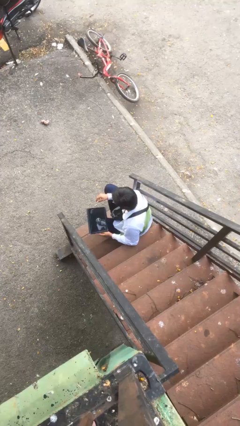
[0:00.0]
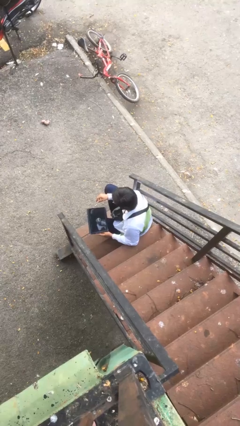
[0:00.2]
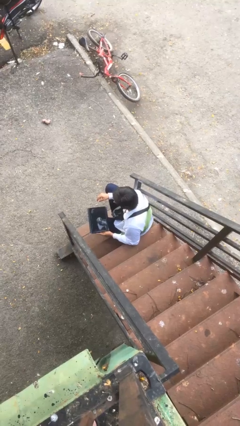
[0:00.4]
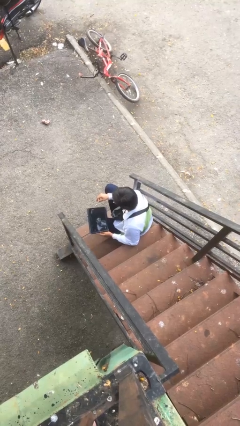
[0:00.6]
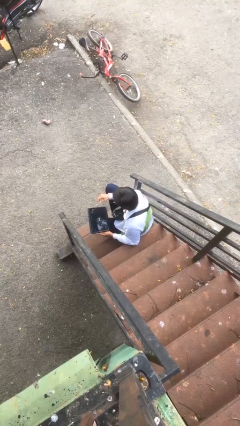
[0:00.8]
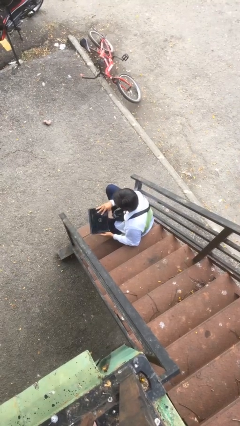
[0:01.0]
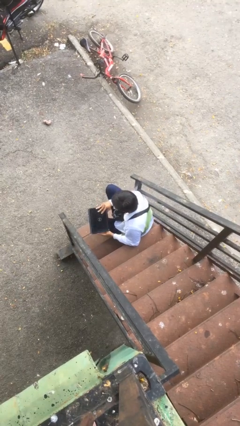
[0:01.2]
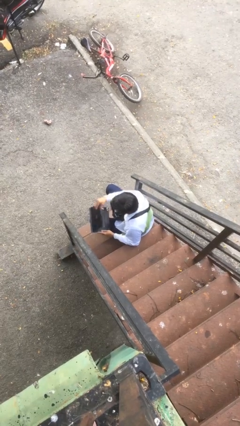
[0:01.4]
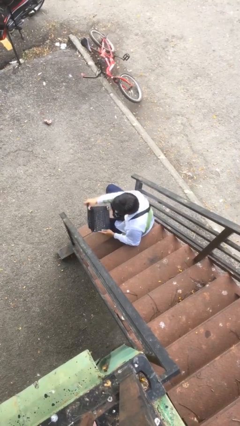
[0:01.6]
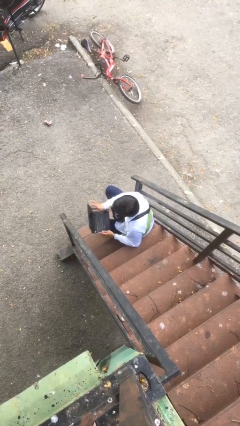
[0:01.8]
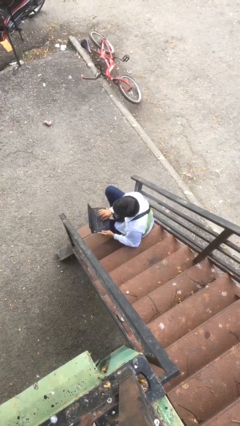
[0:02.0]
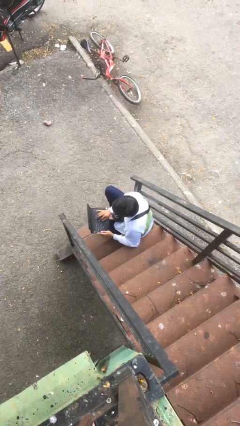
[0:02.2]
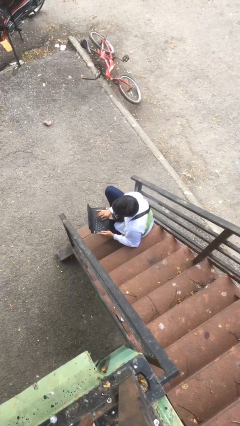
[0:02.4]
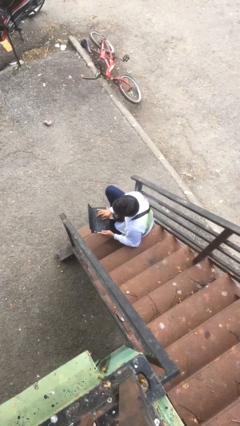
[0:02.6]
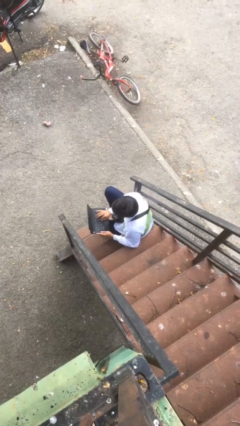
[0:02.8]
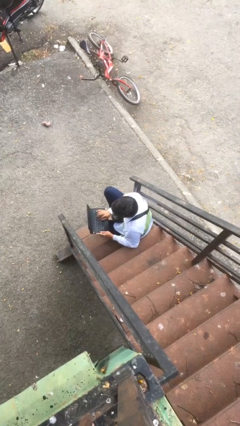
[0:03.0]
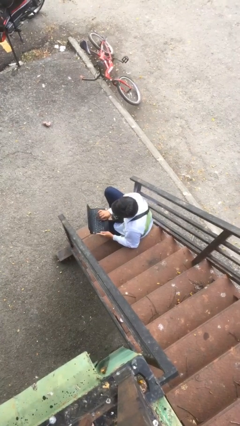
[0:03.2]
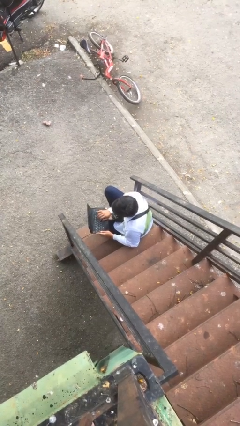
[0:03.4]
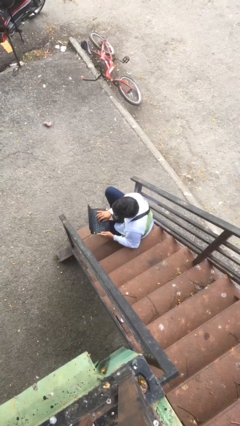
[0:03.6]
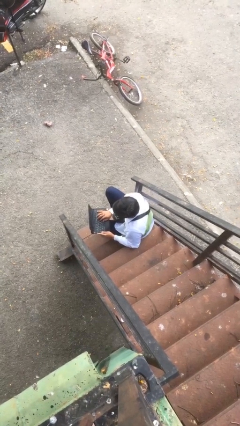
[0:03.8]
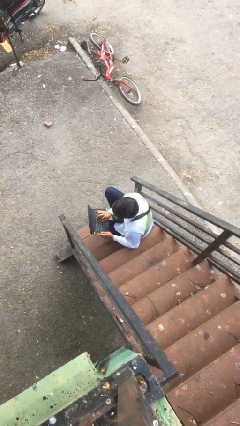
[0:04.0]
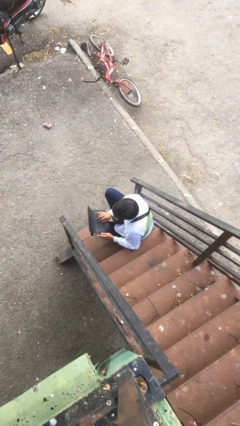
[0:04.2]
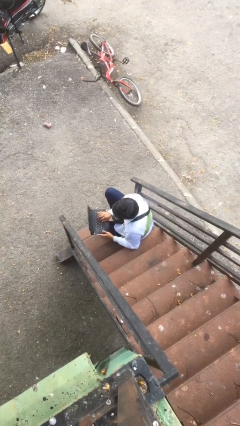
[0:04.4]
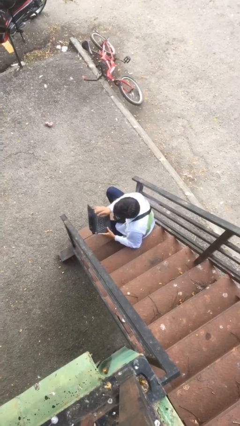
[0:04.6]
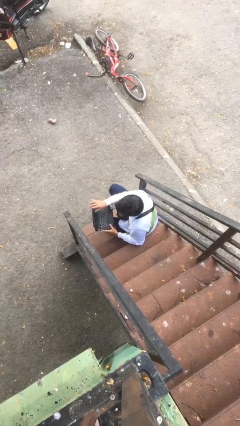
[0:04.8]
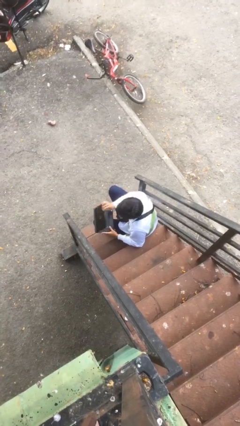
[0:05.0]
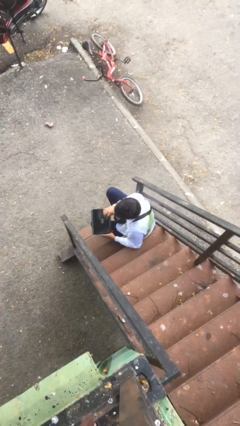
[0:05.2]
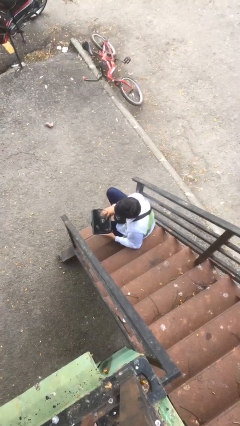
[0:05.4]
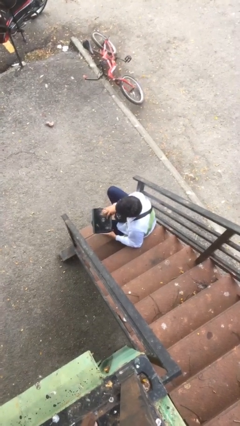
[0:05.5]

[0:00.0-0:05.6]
person interacts with laptop

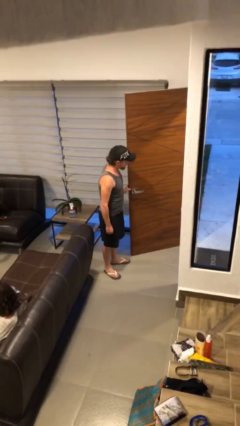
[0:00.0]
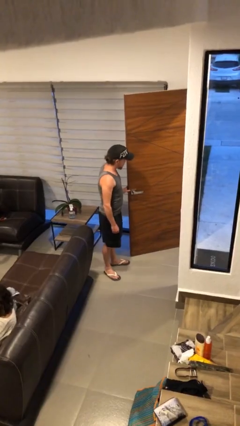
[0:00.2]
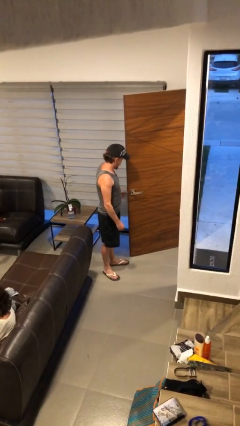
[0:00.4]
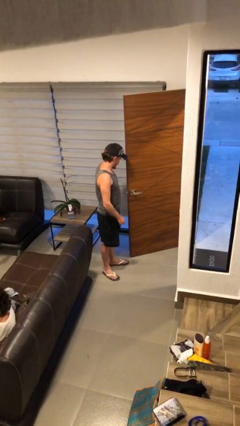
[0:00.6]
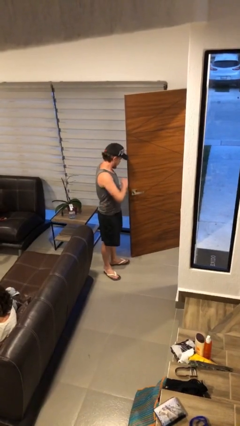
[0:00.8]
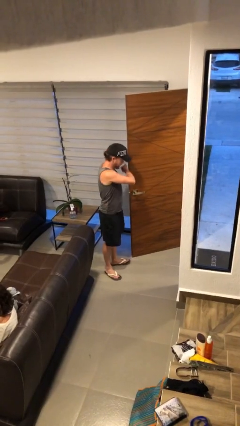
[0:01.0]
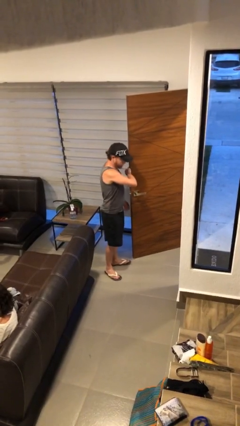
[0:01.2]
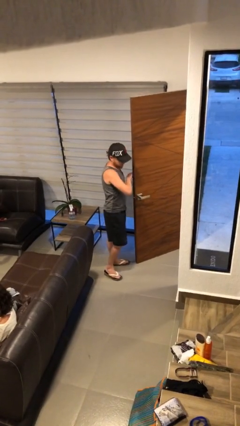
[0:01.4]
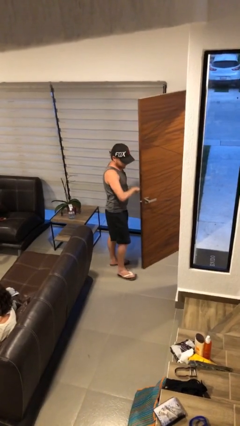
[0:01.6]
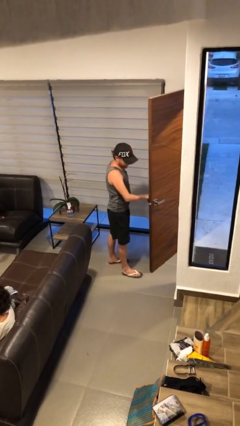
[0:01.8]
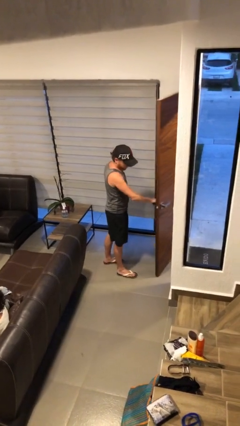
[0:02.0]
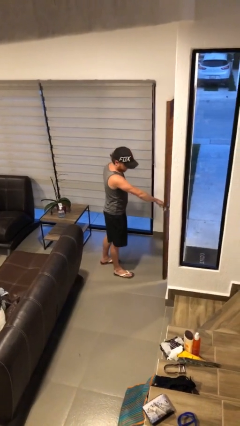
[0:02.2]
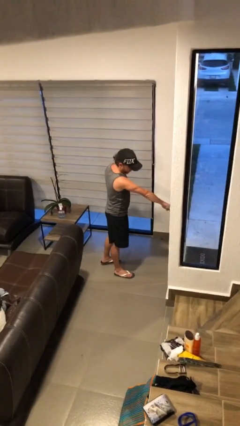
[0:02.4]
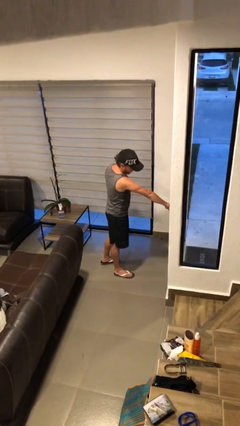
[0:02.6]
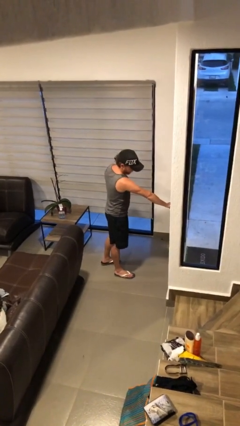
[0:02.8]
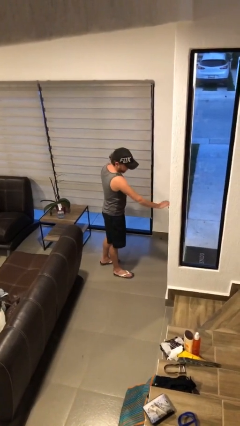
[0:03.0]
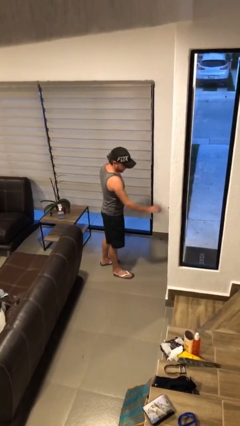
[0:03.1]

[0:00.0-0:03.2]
person closes facility door

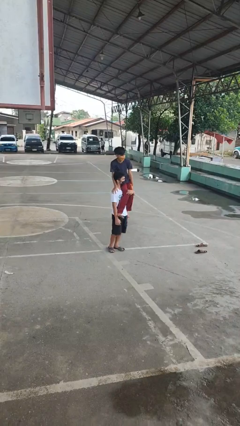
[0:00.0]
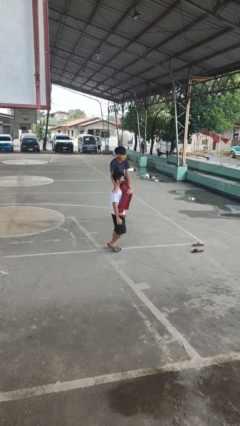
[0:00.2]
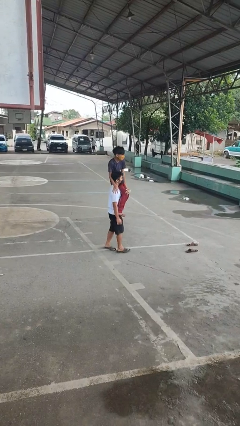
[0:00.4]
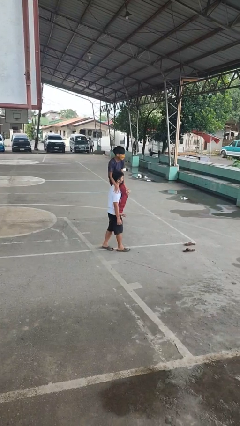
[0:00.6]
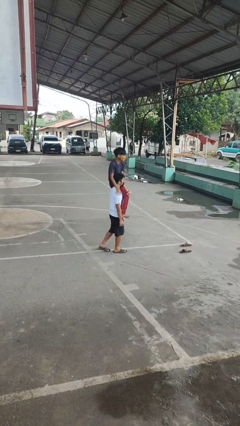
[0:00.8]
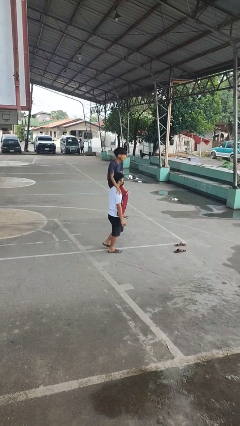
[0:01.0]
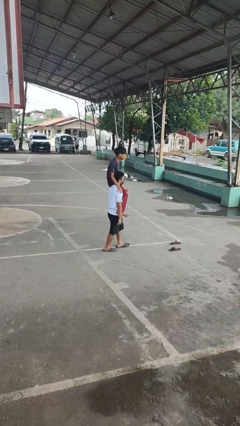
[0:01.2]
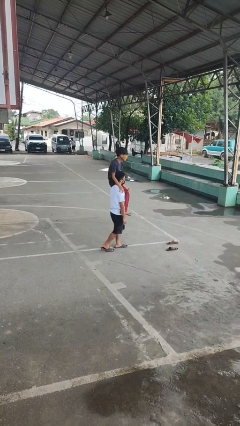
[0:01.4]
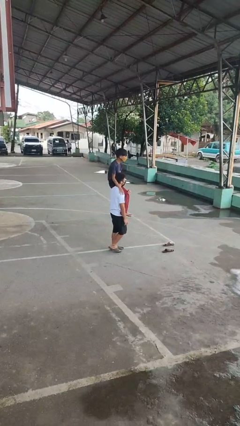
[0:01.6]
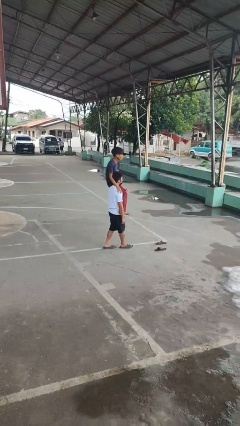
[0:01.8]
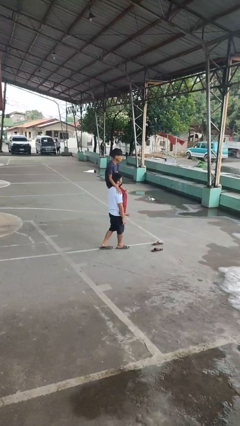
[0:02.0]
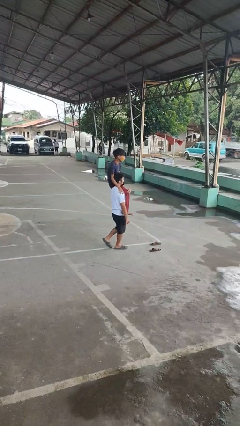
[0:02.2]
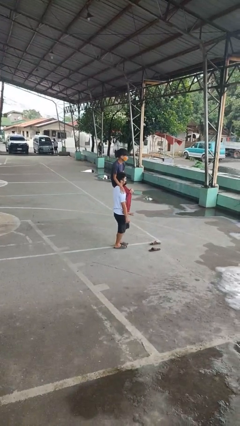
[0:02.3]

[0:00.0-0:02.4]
person carries person on shoulders

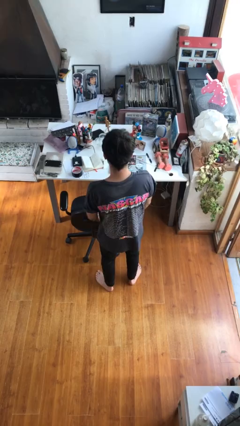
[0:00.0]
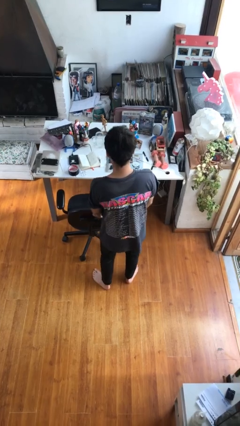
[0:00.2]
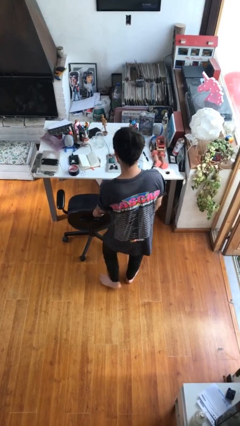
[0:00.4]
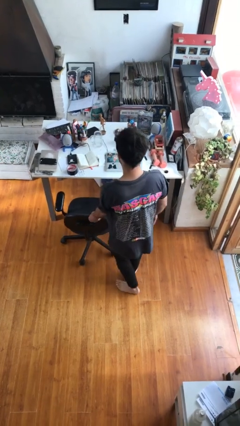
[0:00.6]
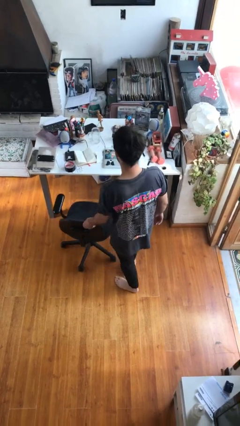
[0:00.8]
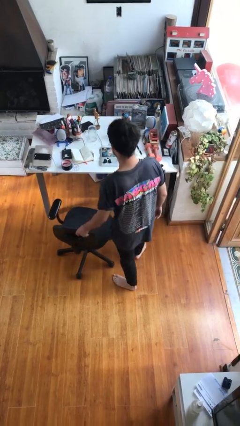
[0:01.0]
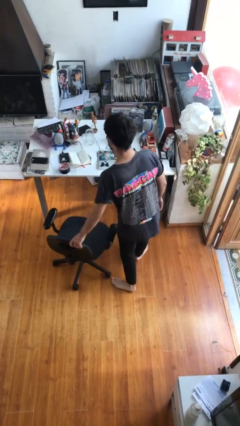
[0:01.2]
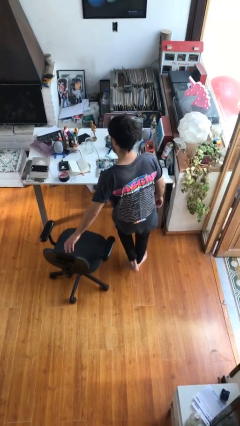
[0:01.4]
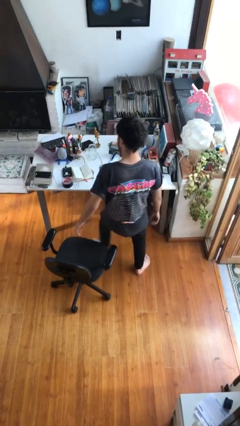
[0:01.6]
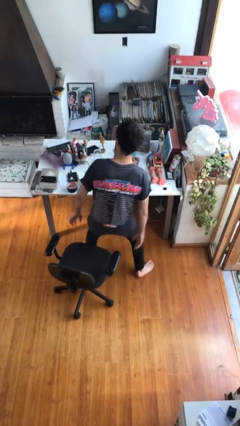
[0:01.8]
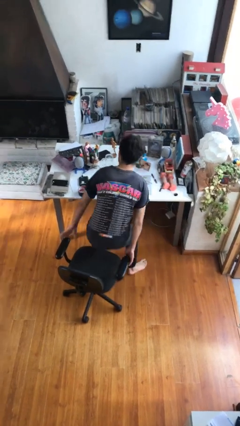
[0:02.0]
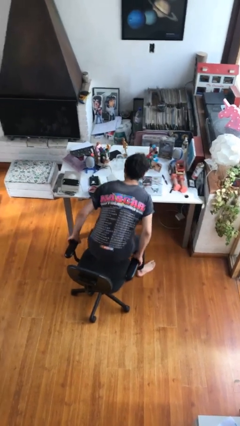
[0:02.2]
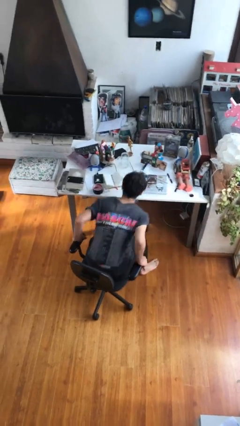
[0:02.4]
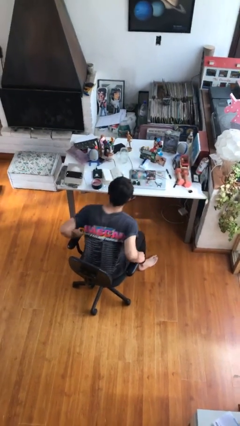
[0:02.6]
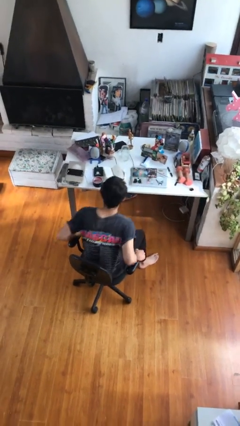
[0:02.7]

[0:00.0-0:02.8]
person sits down

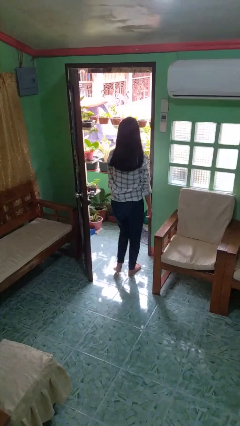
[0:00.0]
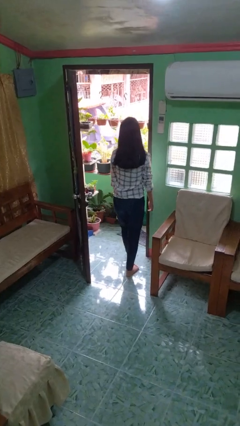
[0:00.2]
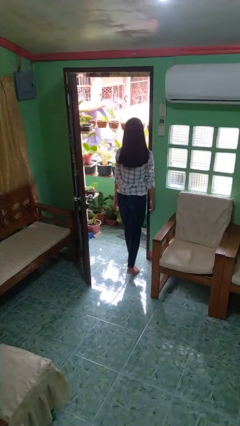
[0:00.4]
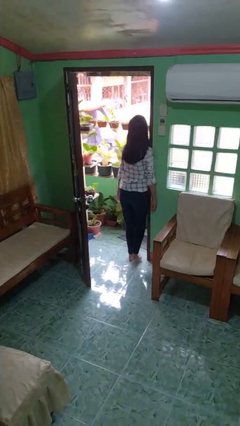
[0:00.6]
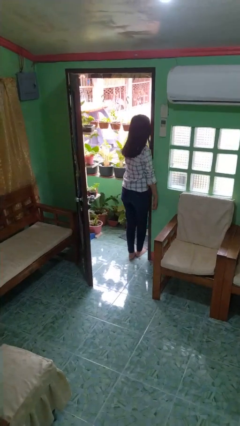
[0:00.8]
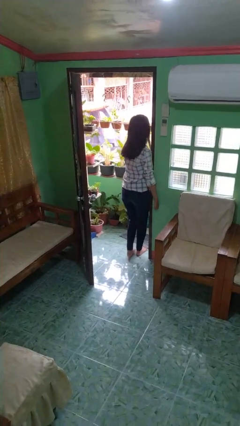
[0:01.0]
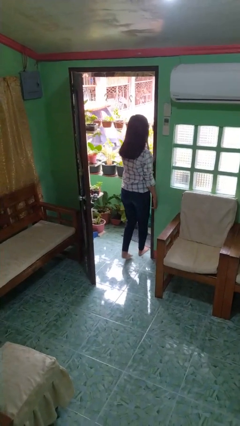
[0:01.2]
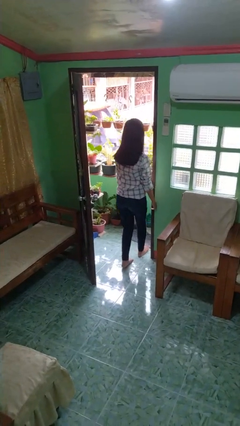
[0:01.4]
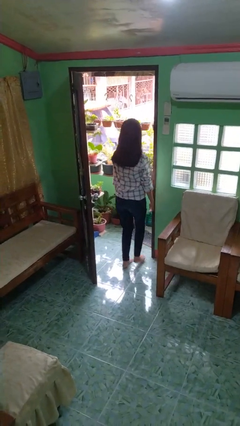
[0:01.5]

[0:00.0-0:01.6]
person bumps into wall

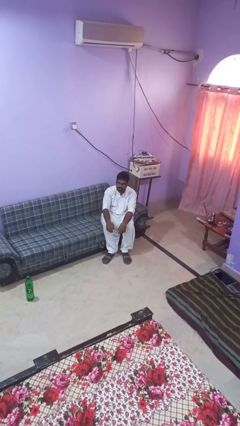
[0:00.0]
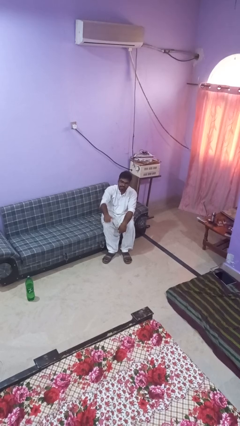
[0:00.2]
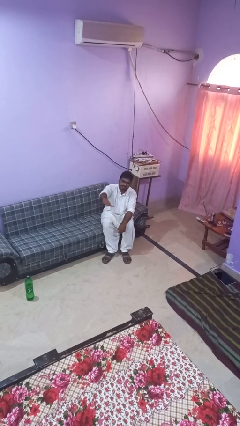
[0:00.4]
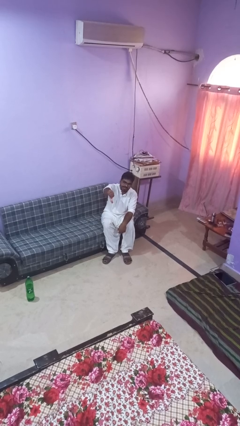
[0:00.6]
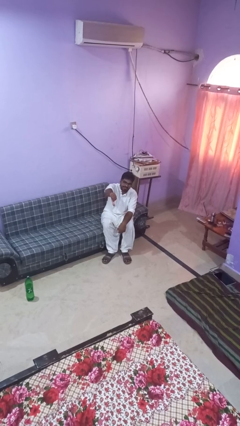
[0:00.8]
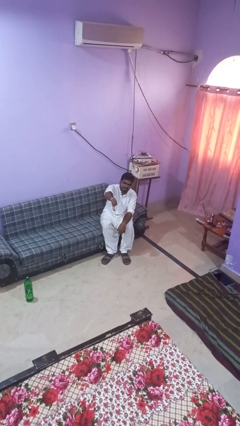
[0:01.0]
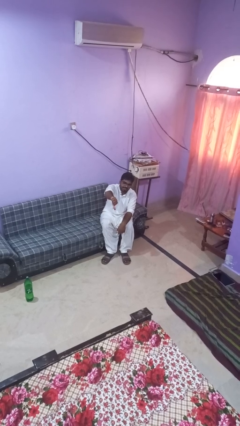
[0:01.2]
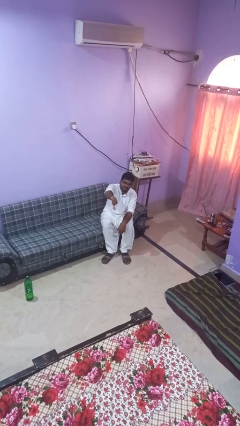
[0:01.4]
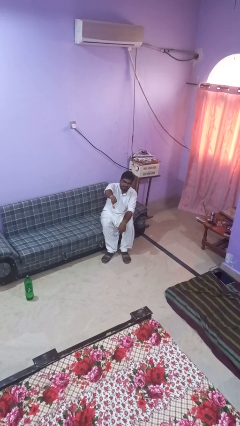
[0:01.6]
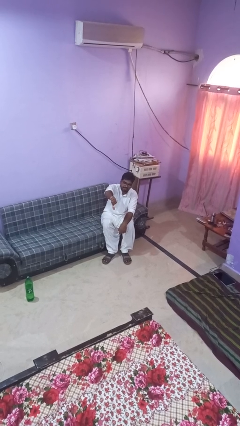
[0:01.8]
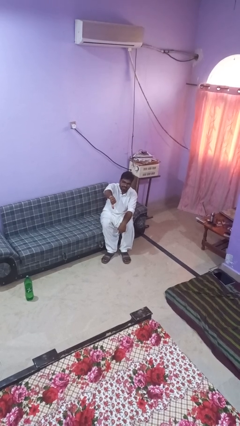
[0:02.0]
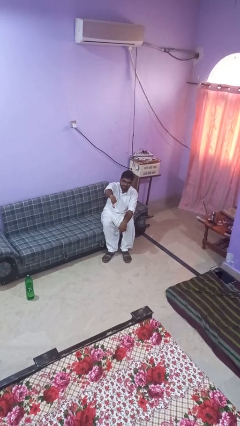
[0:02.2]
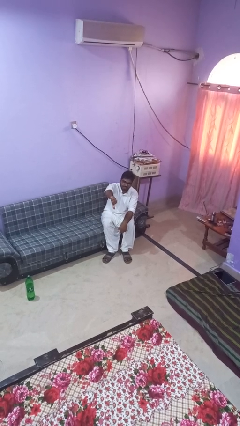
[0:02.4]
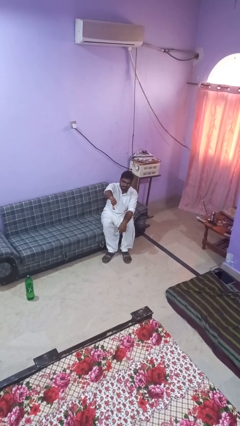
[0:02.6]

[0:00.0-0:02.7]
person gestures thumbs down
